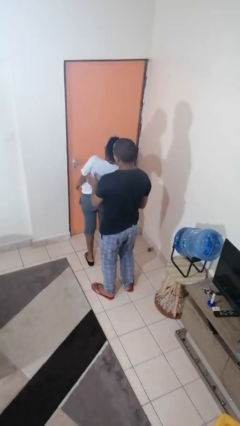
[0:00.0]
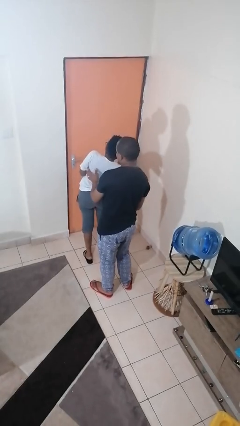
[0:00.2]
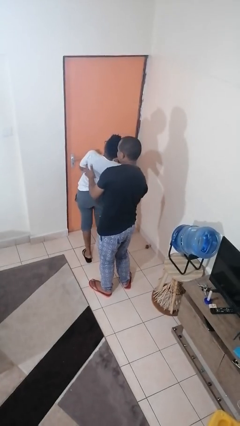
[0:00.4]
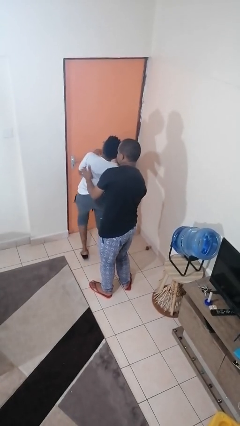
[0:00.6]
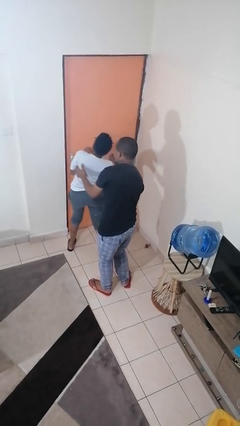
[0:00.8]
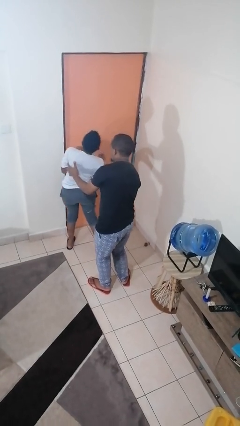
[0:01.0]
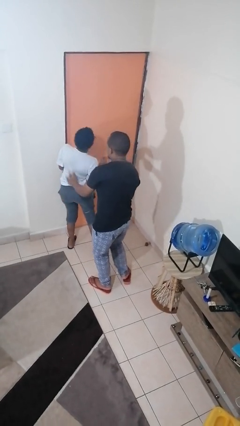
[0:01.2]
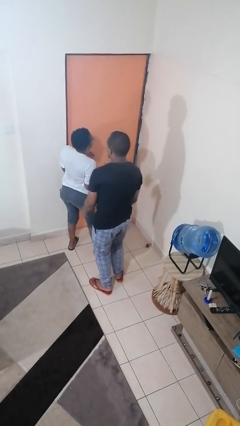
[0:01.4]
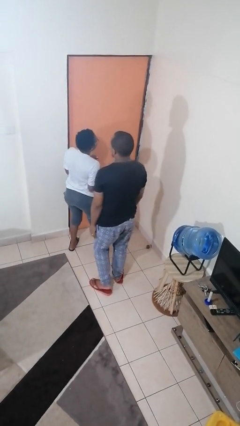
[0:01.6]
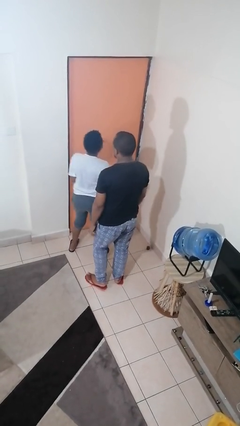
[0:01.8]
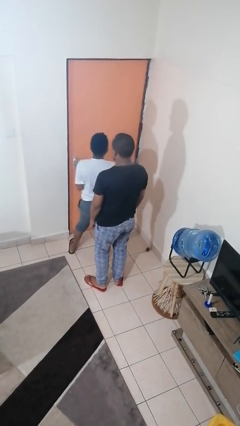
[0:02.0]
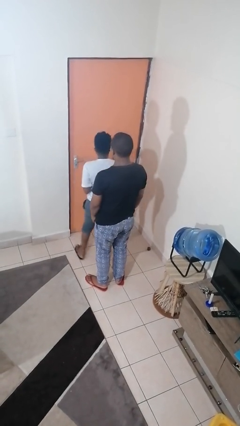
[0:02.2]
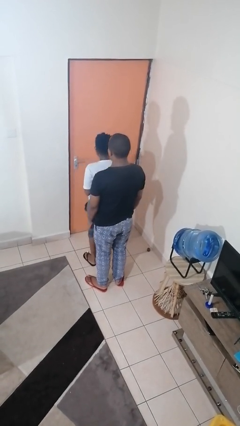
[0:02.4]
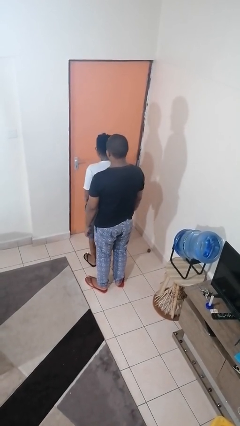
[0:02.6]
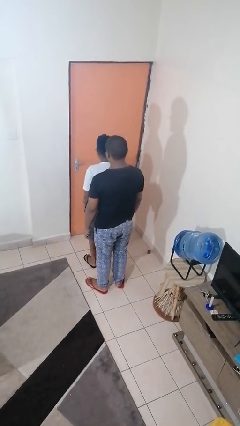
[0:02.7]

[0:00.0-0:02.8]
person tickles person

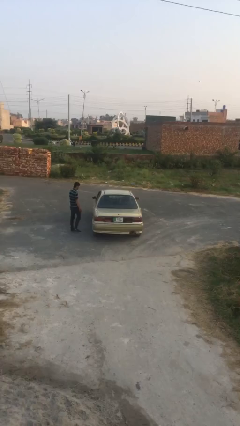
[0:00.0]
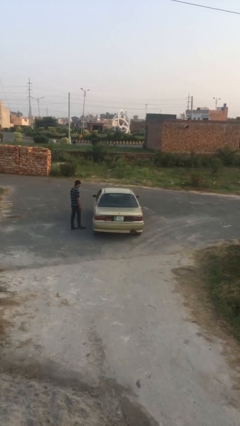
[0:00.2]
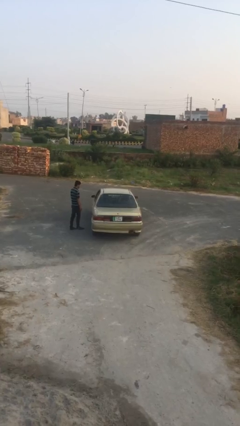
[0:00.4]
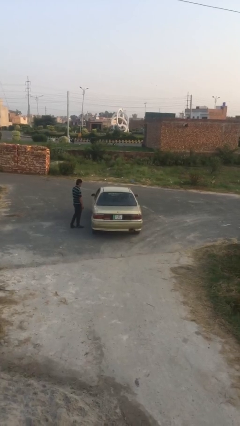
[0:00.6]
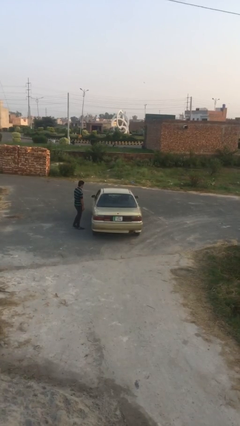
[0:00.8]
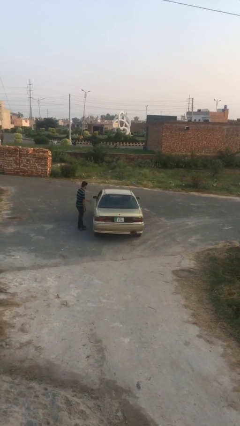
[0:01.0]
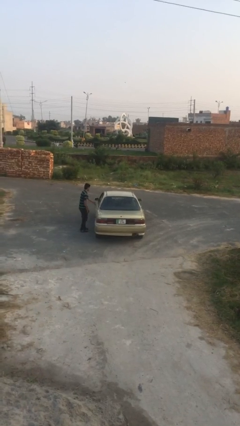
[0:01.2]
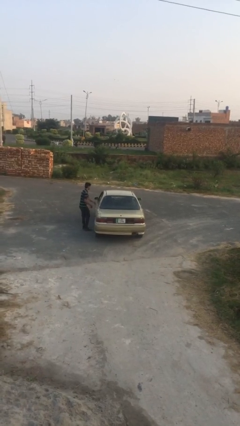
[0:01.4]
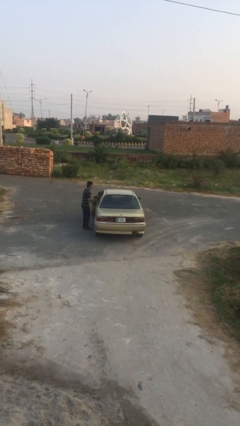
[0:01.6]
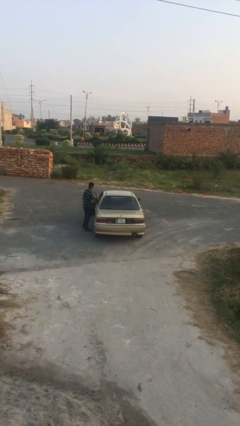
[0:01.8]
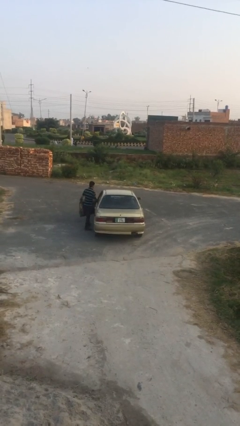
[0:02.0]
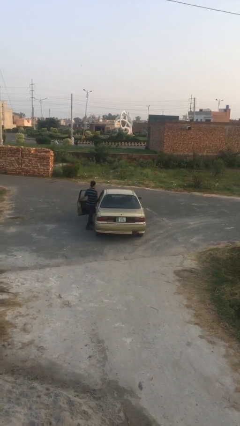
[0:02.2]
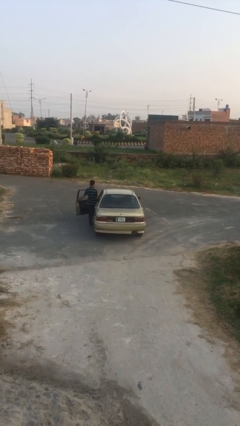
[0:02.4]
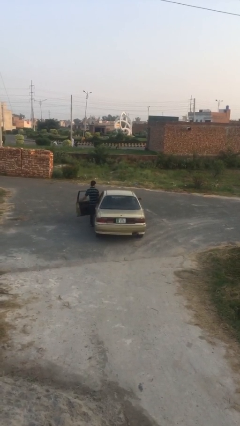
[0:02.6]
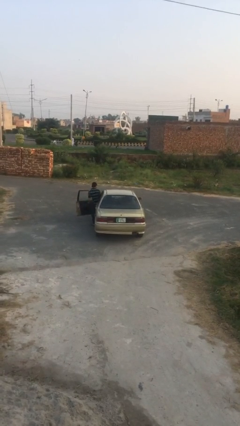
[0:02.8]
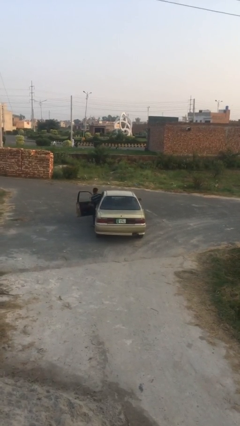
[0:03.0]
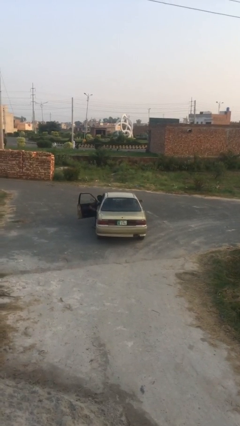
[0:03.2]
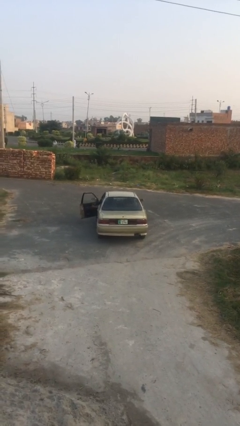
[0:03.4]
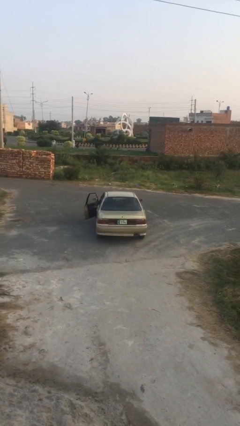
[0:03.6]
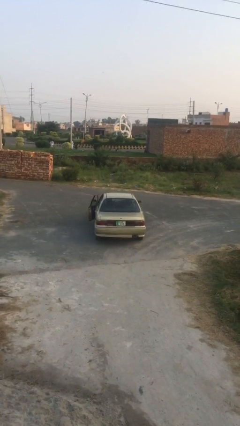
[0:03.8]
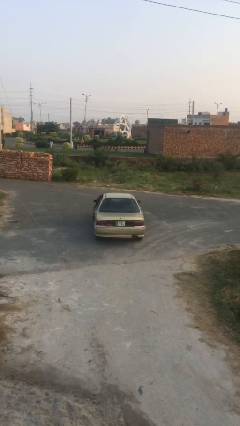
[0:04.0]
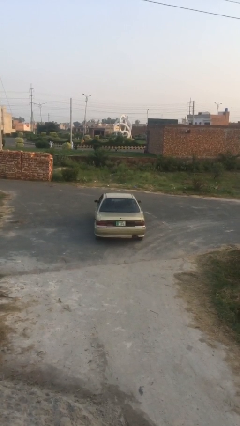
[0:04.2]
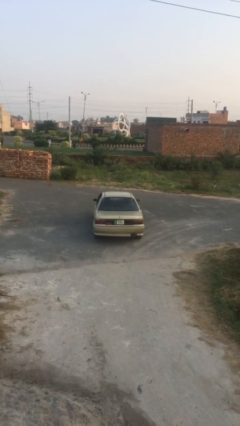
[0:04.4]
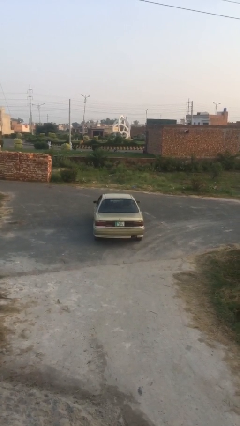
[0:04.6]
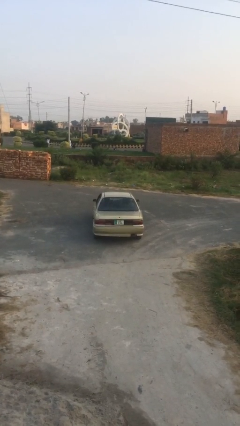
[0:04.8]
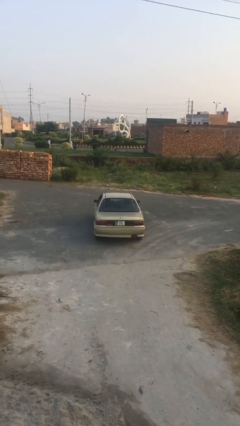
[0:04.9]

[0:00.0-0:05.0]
car picks up person

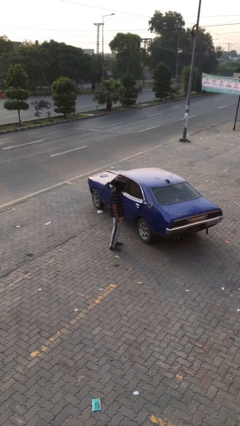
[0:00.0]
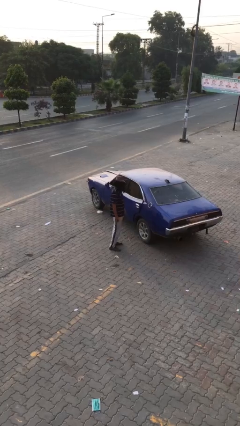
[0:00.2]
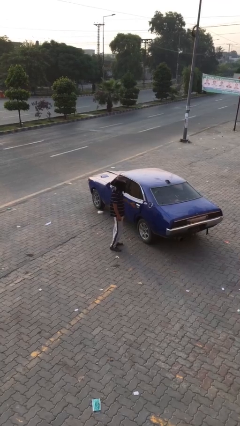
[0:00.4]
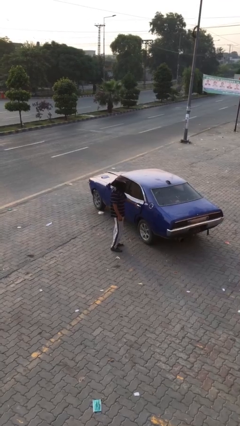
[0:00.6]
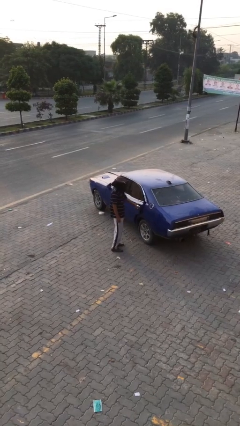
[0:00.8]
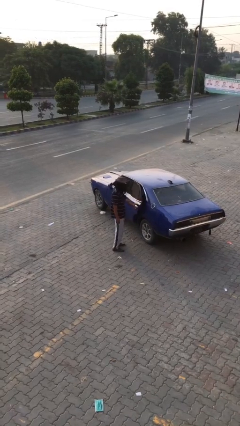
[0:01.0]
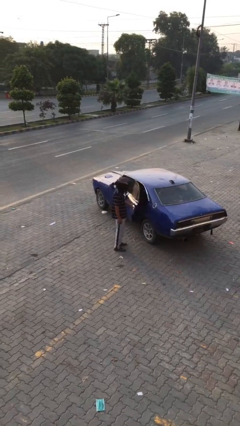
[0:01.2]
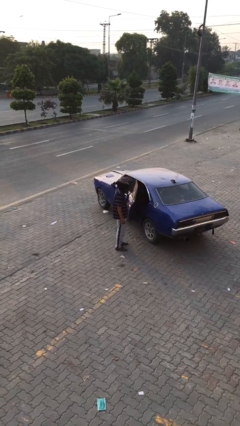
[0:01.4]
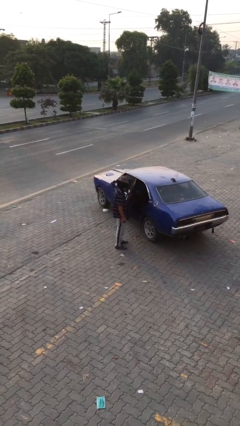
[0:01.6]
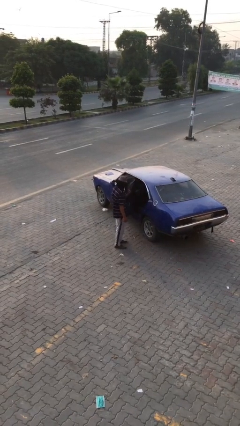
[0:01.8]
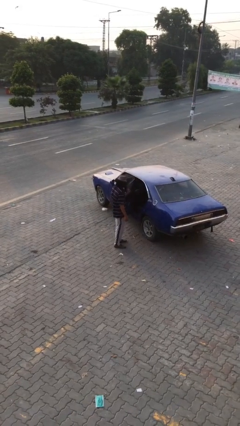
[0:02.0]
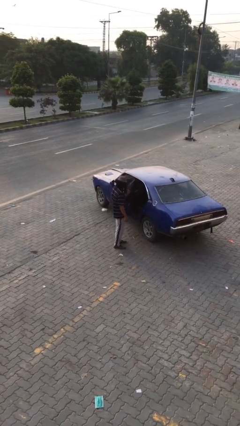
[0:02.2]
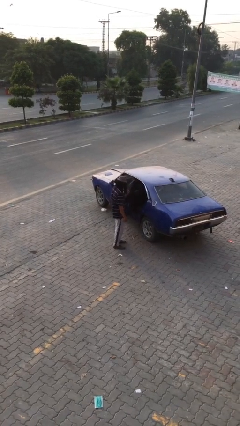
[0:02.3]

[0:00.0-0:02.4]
person opens car door

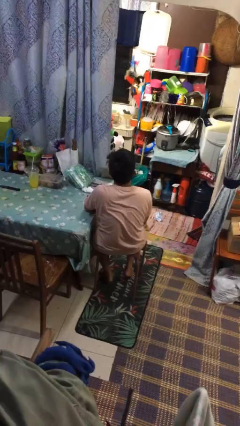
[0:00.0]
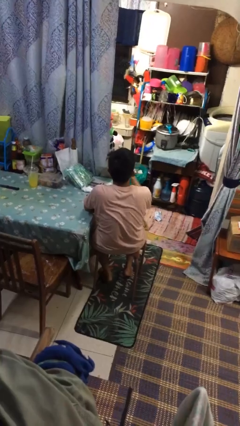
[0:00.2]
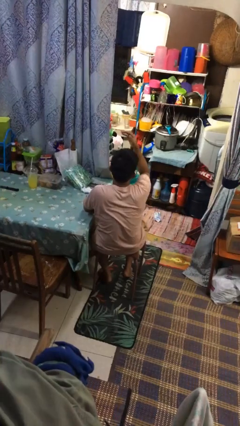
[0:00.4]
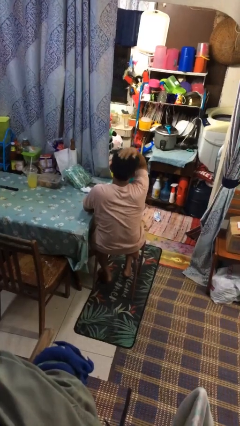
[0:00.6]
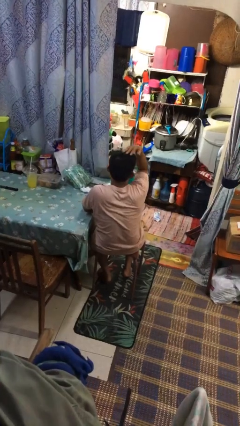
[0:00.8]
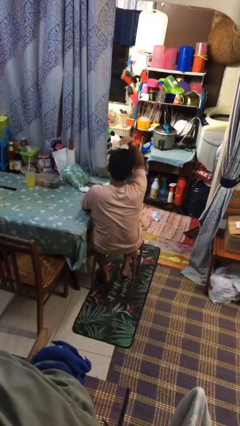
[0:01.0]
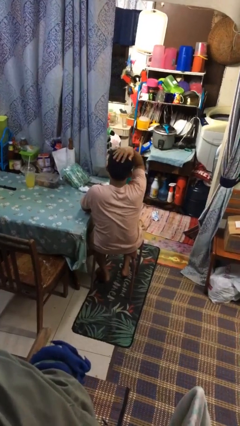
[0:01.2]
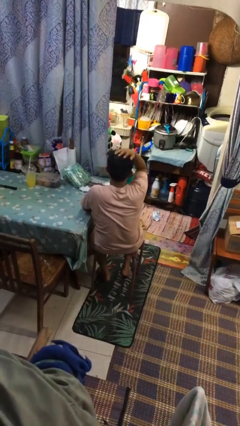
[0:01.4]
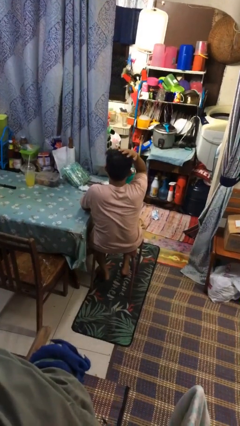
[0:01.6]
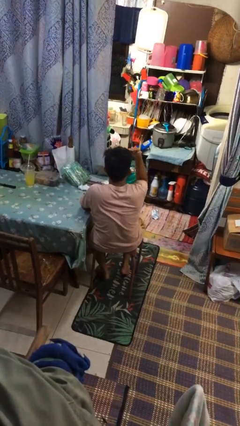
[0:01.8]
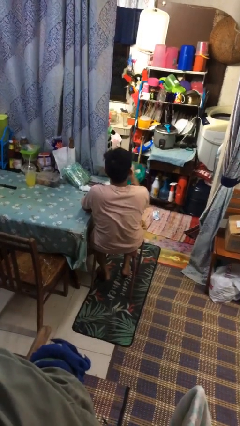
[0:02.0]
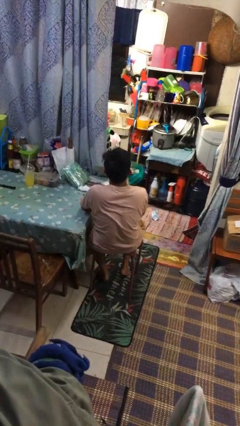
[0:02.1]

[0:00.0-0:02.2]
person pats head

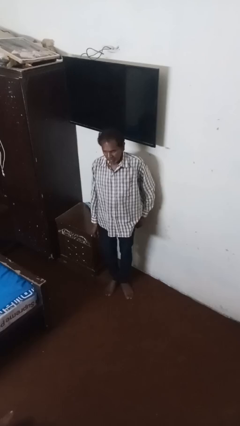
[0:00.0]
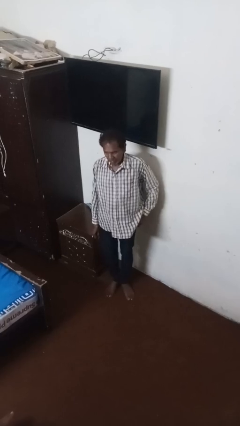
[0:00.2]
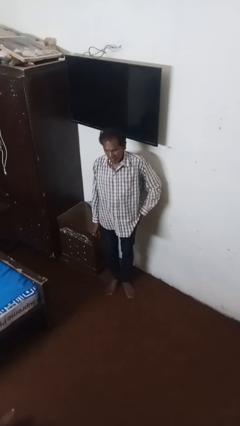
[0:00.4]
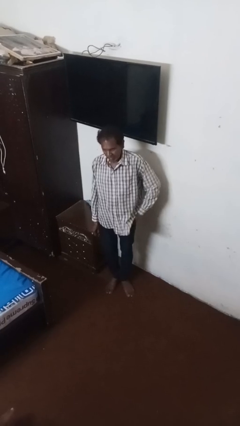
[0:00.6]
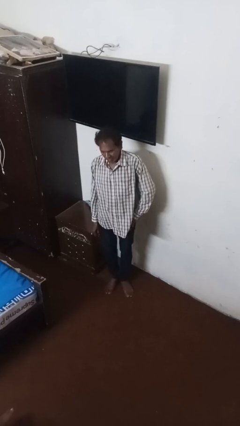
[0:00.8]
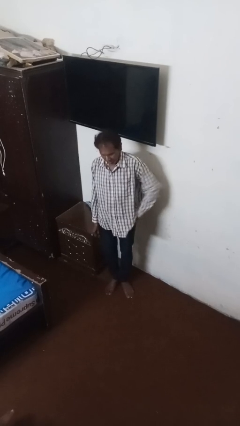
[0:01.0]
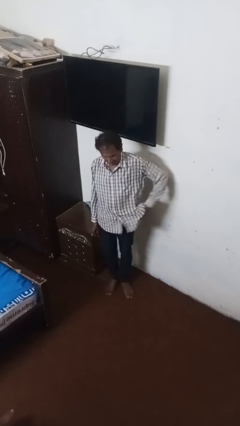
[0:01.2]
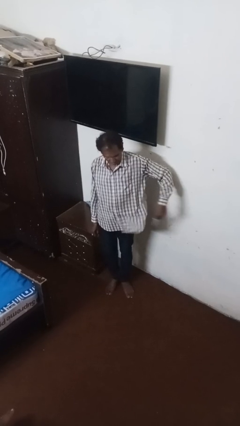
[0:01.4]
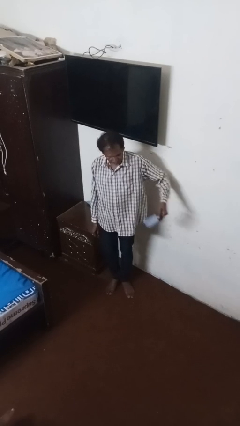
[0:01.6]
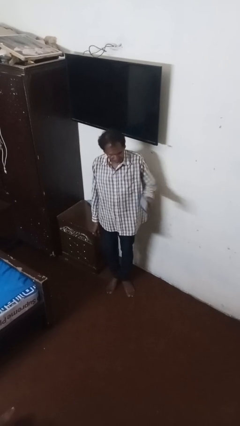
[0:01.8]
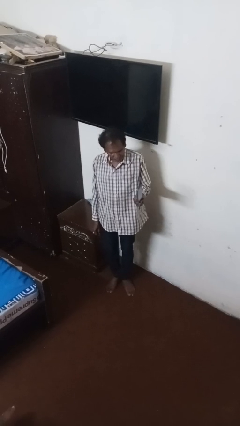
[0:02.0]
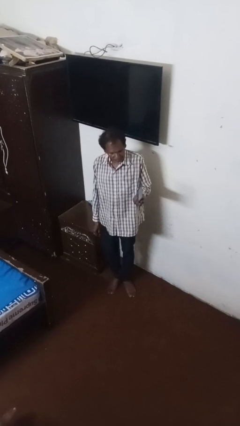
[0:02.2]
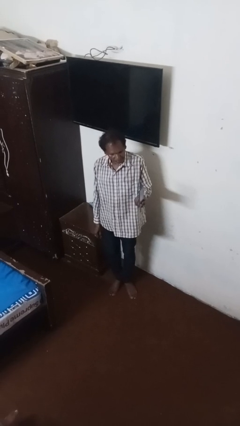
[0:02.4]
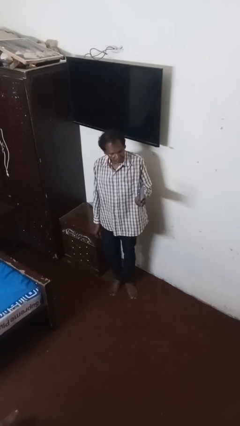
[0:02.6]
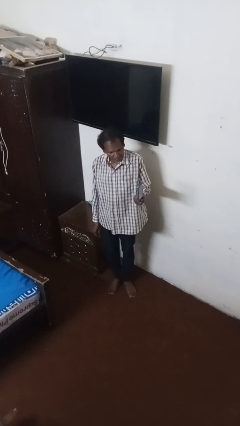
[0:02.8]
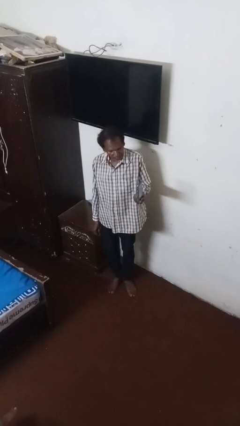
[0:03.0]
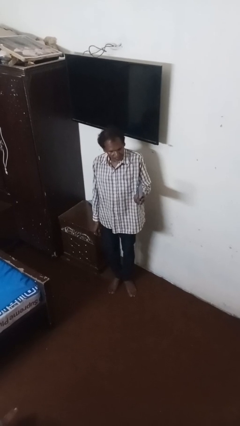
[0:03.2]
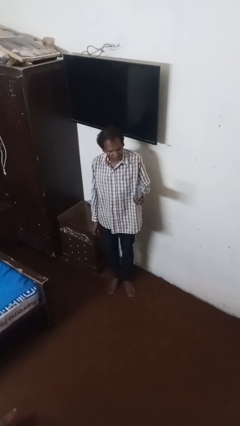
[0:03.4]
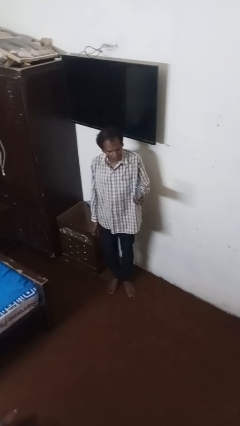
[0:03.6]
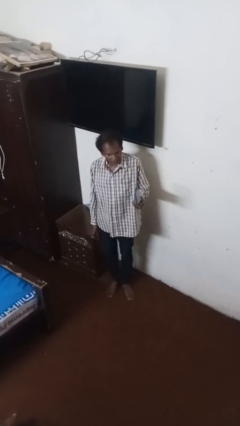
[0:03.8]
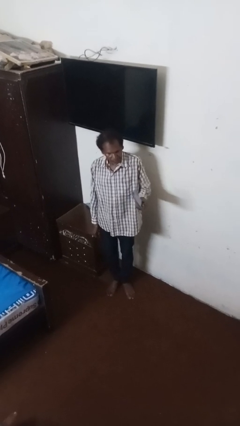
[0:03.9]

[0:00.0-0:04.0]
person takes phone from pocket

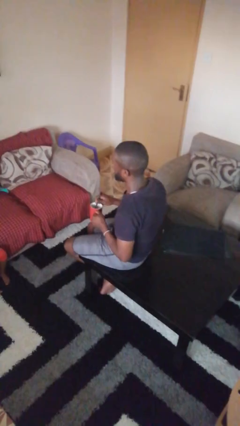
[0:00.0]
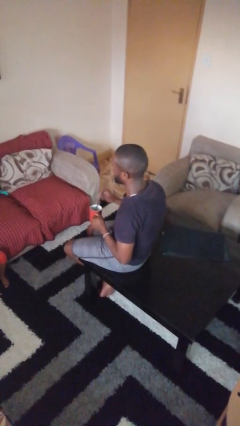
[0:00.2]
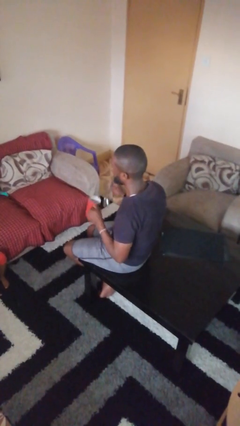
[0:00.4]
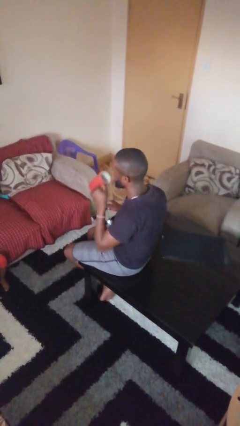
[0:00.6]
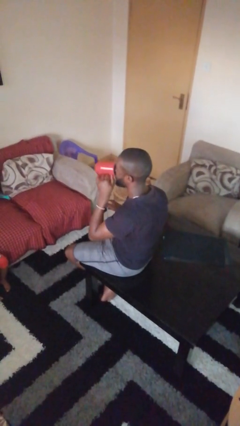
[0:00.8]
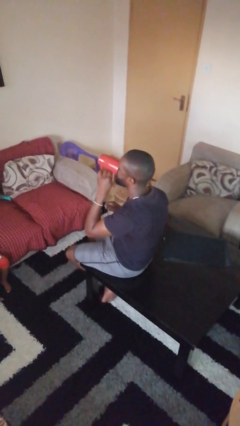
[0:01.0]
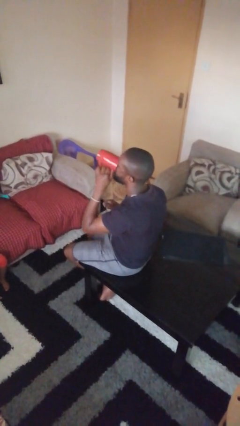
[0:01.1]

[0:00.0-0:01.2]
person drinks from mug
